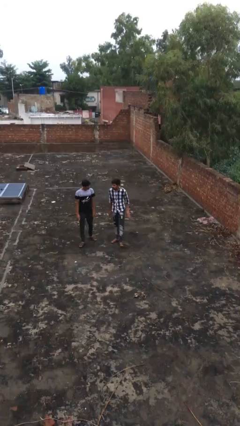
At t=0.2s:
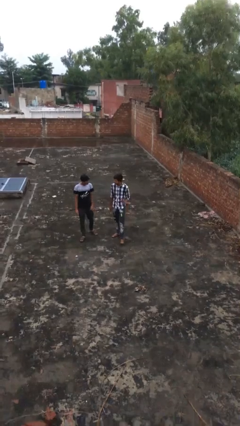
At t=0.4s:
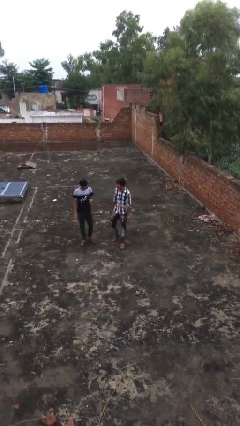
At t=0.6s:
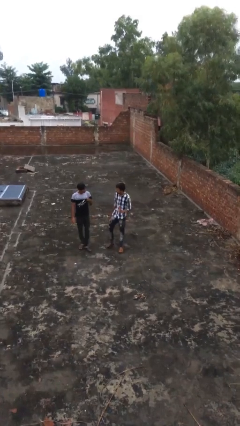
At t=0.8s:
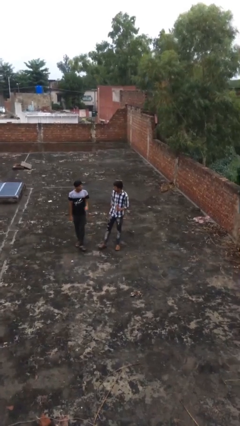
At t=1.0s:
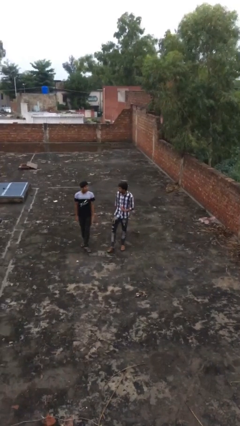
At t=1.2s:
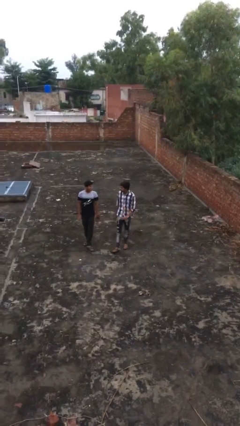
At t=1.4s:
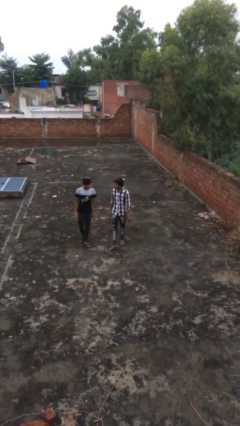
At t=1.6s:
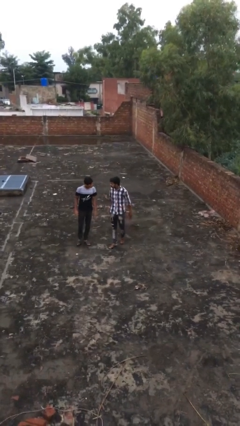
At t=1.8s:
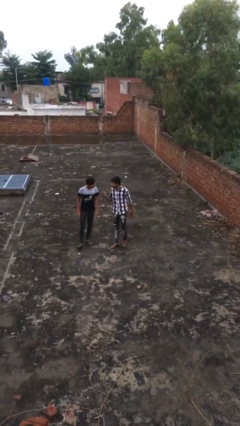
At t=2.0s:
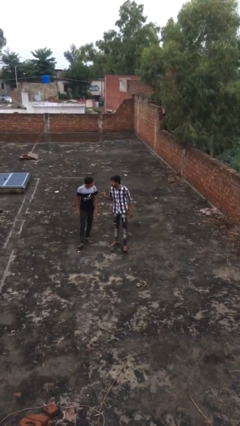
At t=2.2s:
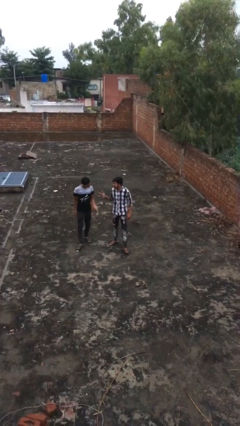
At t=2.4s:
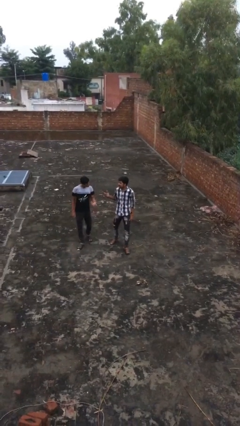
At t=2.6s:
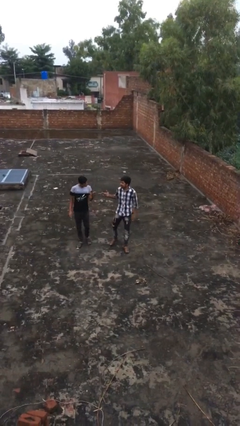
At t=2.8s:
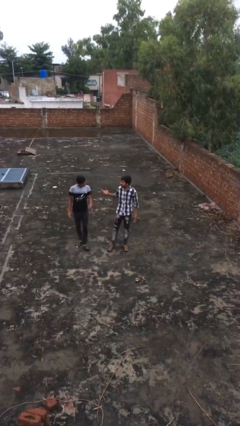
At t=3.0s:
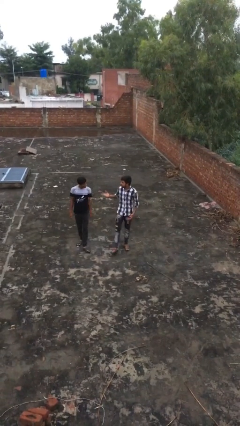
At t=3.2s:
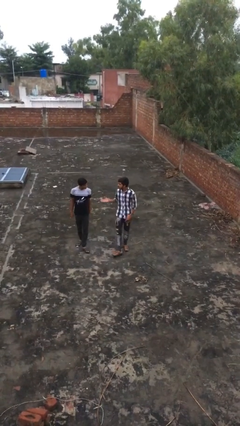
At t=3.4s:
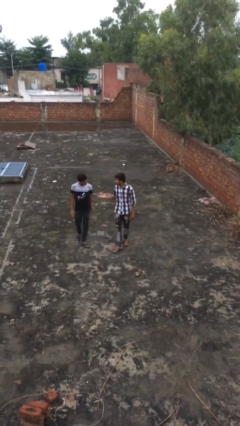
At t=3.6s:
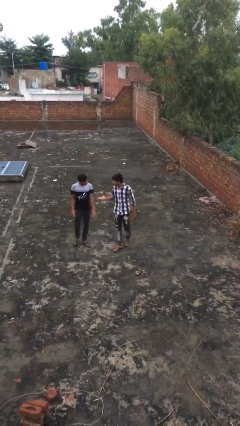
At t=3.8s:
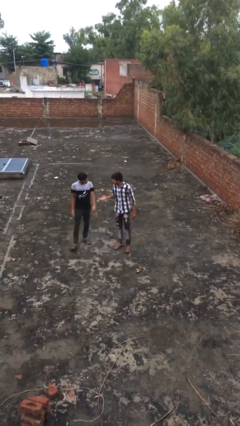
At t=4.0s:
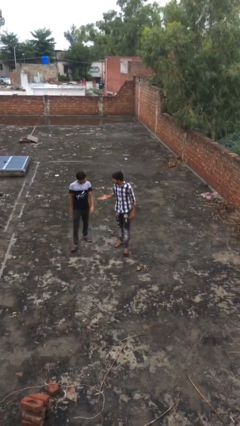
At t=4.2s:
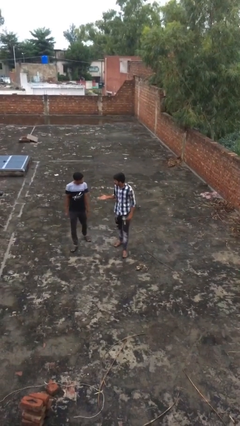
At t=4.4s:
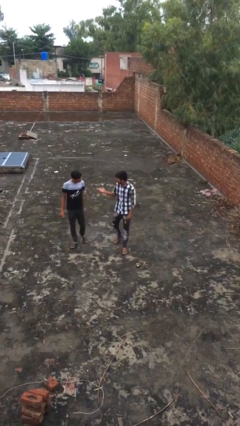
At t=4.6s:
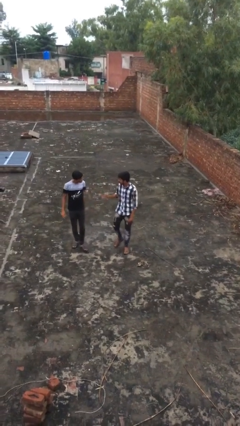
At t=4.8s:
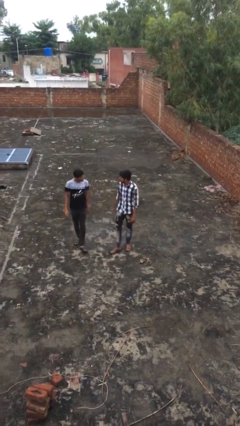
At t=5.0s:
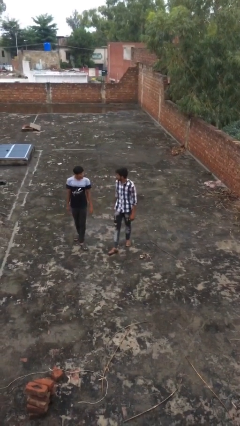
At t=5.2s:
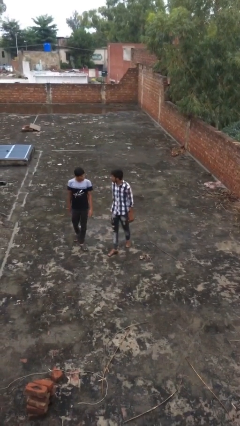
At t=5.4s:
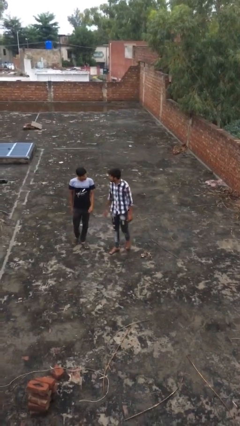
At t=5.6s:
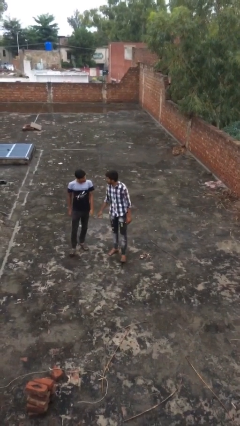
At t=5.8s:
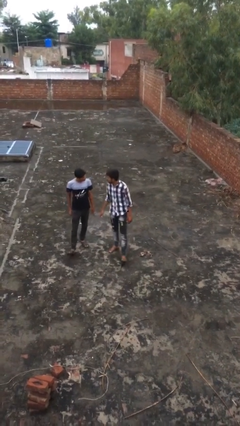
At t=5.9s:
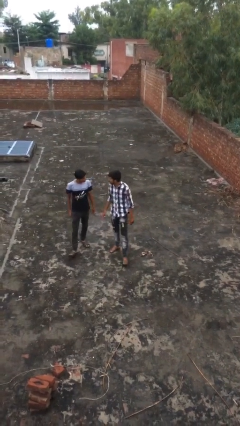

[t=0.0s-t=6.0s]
person talks to person

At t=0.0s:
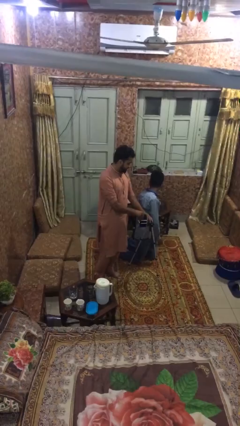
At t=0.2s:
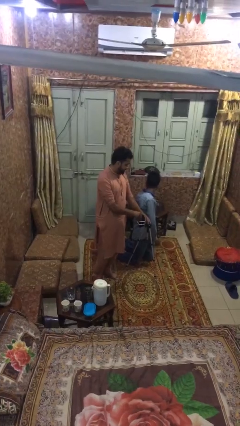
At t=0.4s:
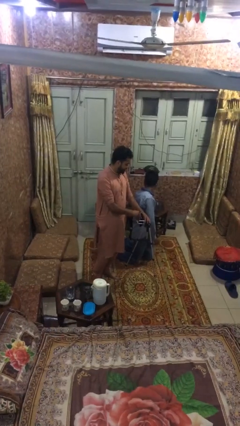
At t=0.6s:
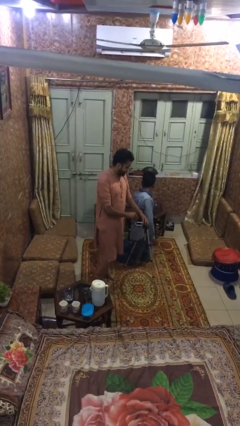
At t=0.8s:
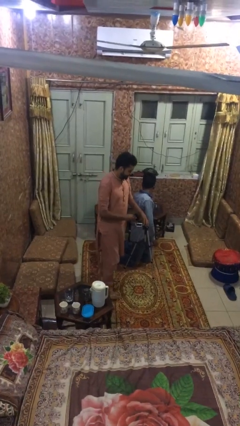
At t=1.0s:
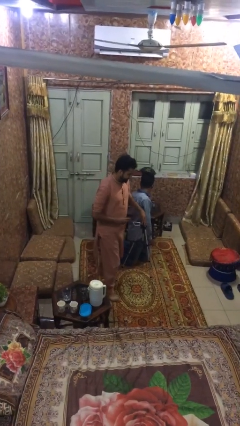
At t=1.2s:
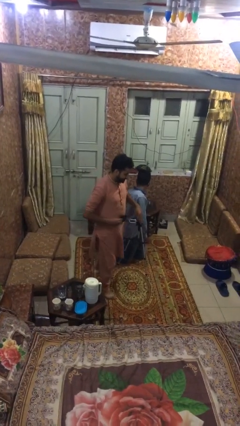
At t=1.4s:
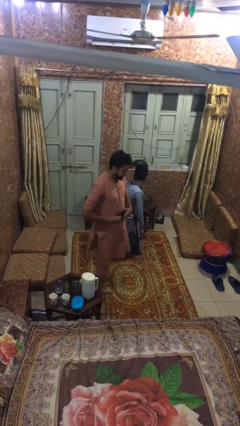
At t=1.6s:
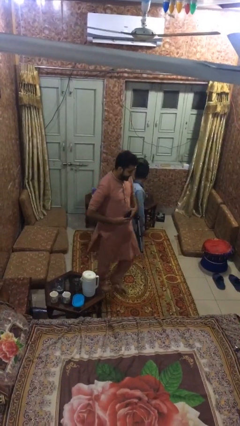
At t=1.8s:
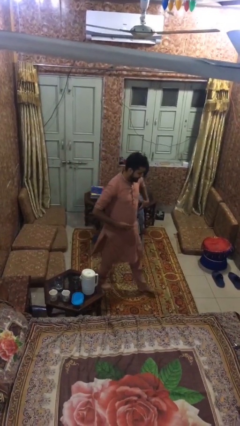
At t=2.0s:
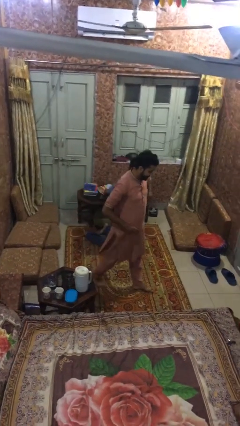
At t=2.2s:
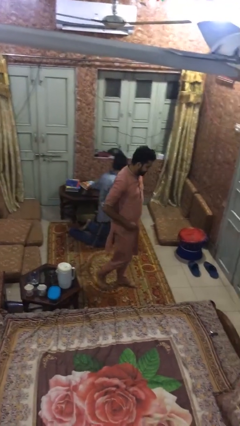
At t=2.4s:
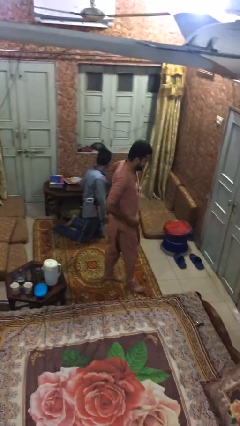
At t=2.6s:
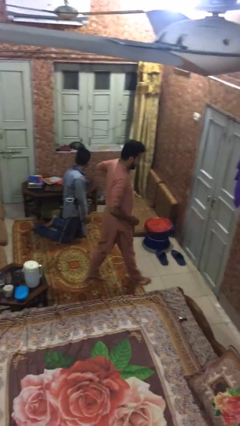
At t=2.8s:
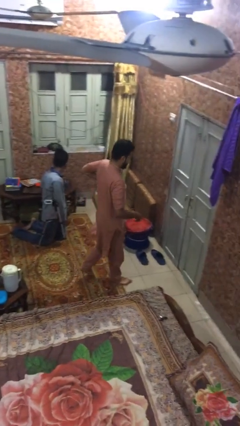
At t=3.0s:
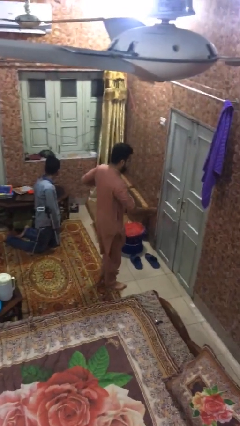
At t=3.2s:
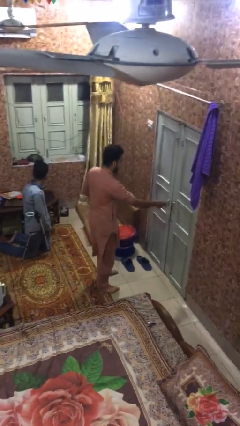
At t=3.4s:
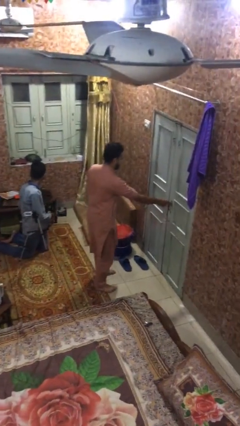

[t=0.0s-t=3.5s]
person steals object from person

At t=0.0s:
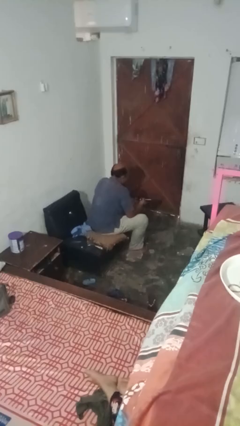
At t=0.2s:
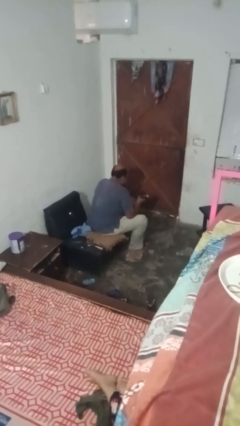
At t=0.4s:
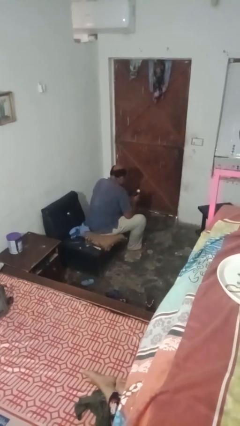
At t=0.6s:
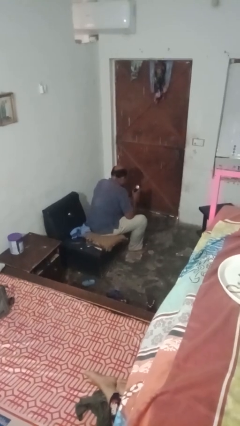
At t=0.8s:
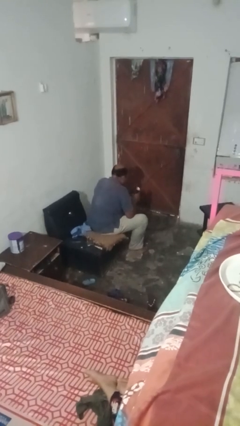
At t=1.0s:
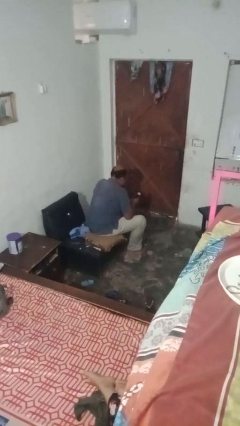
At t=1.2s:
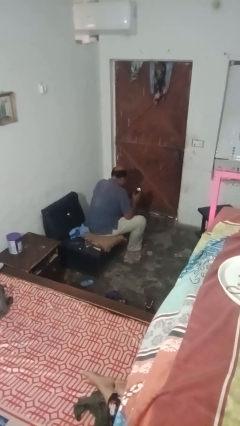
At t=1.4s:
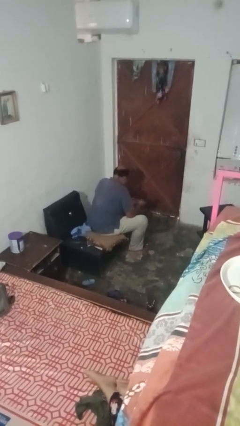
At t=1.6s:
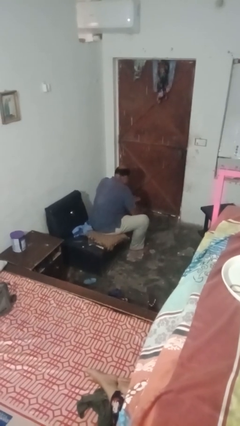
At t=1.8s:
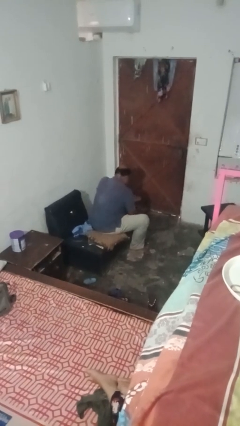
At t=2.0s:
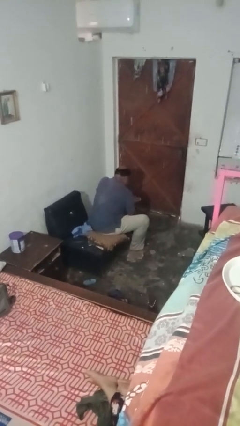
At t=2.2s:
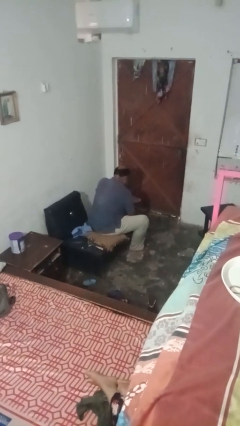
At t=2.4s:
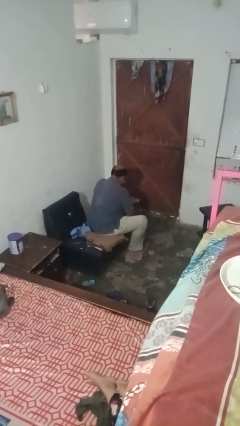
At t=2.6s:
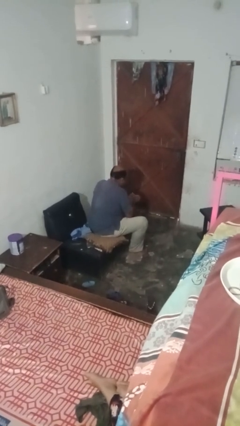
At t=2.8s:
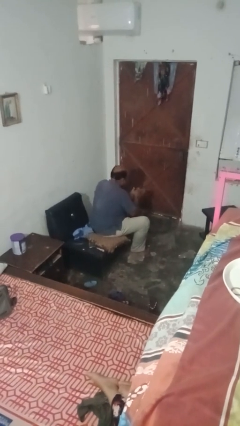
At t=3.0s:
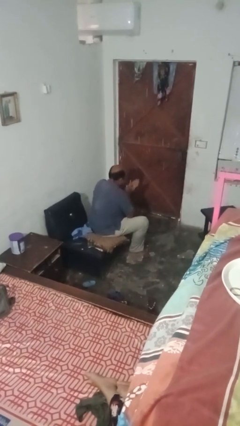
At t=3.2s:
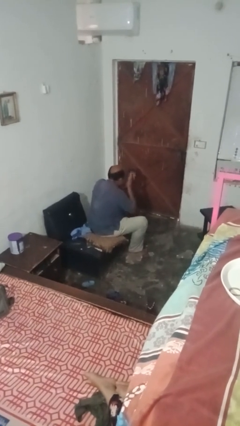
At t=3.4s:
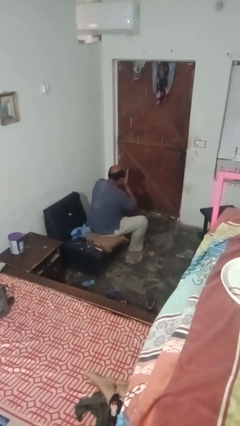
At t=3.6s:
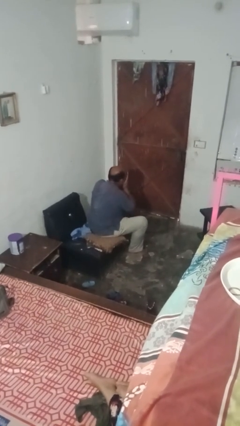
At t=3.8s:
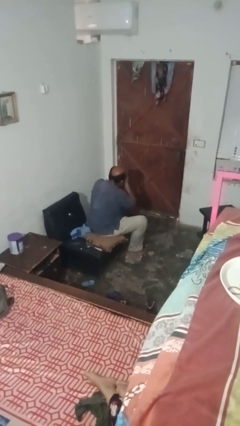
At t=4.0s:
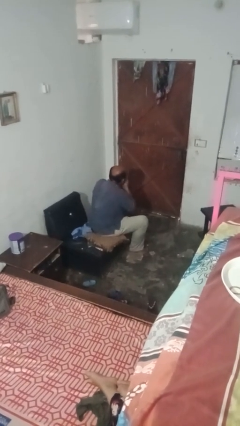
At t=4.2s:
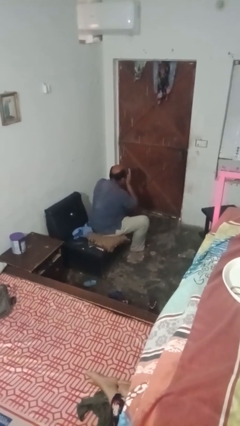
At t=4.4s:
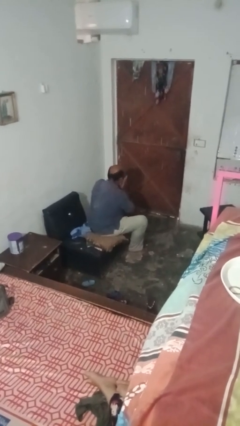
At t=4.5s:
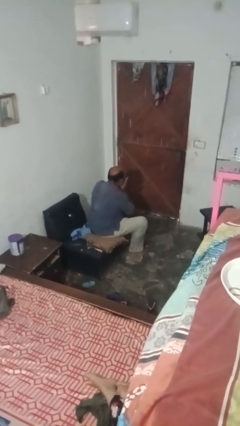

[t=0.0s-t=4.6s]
person applies foundation makeup

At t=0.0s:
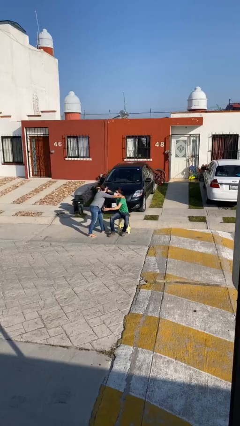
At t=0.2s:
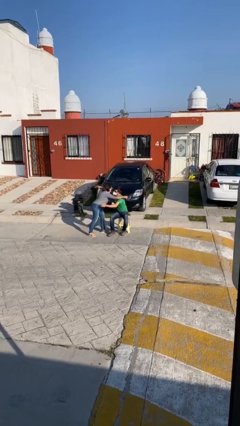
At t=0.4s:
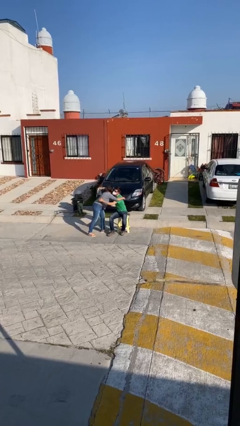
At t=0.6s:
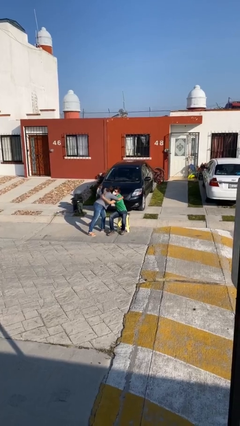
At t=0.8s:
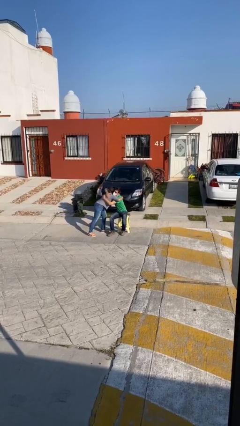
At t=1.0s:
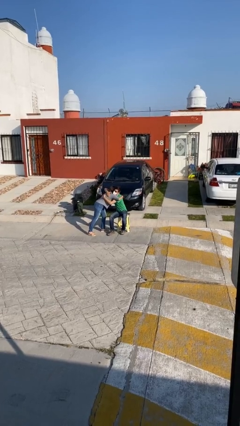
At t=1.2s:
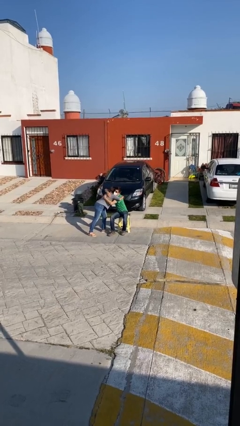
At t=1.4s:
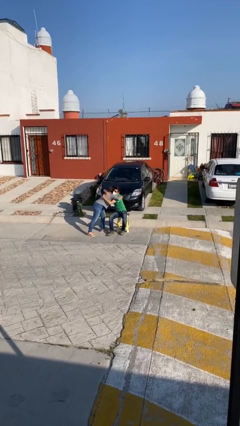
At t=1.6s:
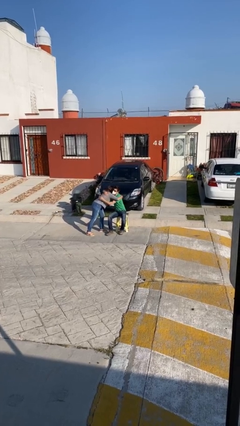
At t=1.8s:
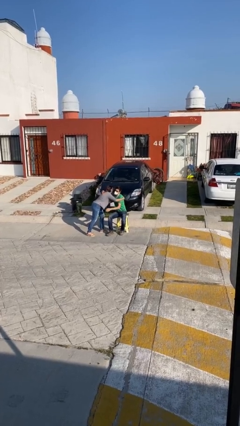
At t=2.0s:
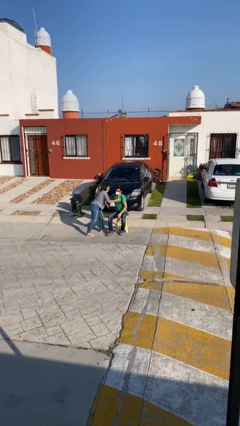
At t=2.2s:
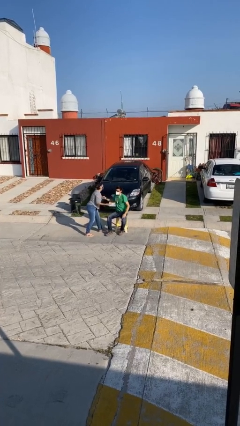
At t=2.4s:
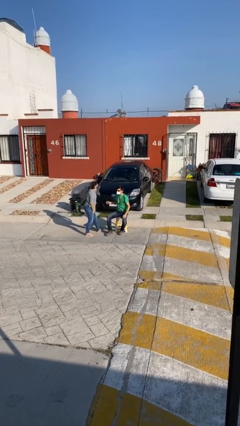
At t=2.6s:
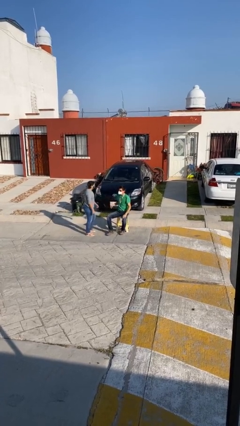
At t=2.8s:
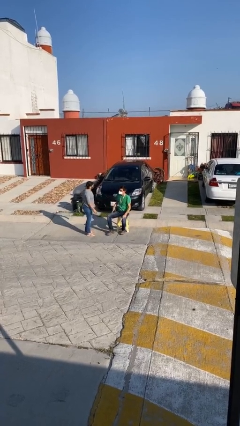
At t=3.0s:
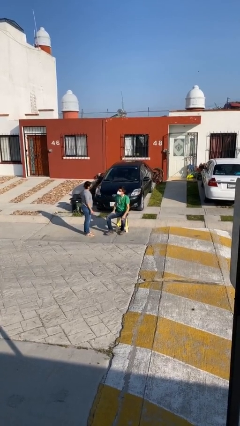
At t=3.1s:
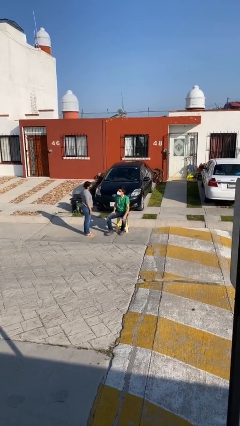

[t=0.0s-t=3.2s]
person embraces person

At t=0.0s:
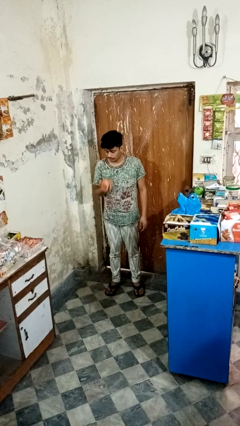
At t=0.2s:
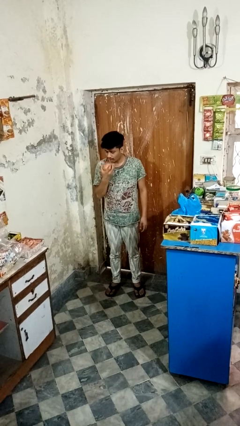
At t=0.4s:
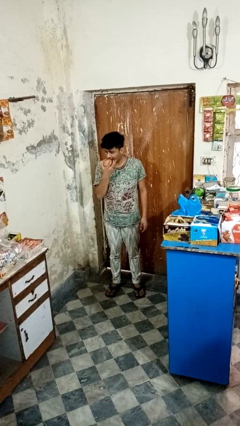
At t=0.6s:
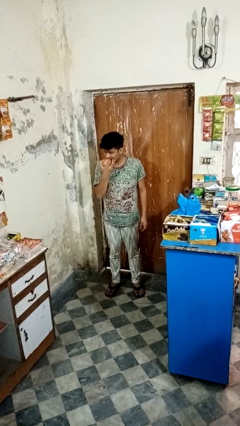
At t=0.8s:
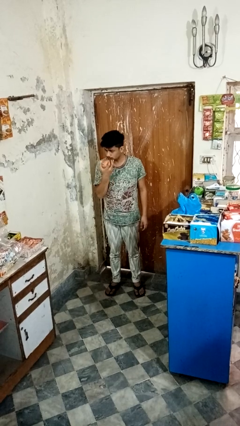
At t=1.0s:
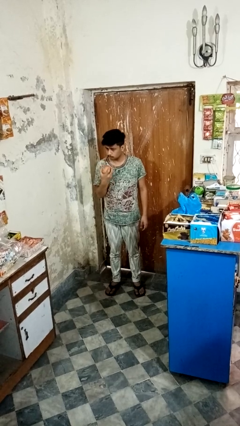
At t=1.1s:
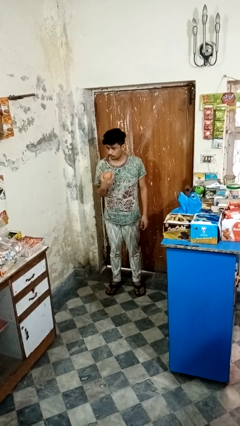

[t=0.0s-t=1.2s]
person eats apple
